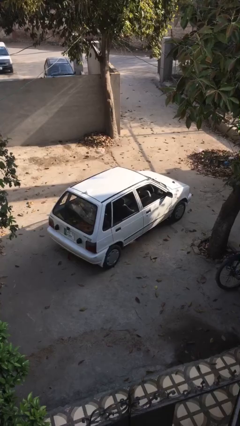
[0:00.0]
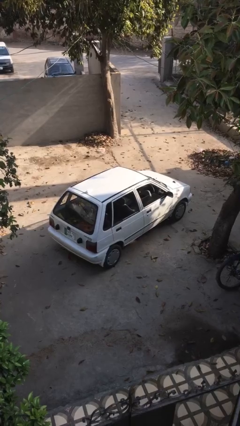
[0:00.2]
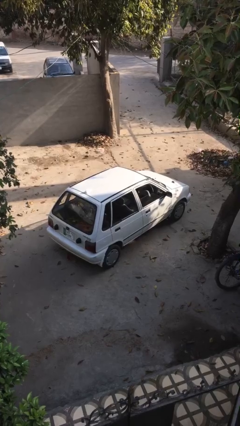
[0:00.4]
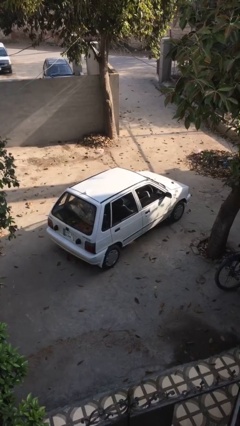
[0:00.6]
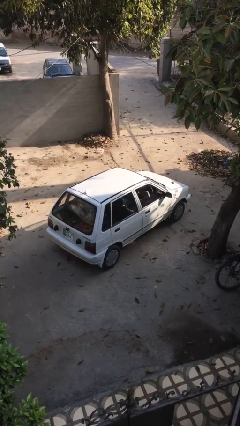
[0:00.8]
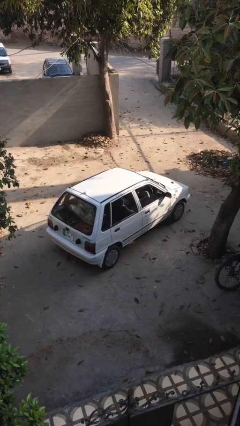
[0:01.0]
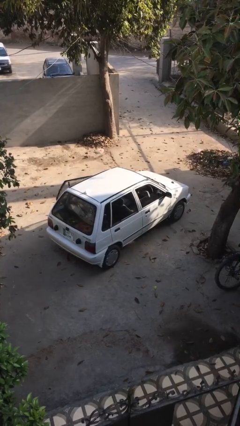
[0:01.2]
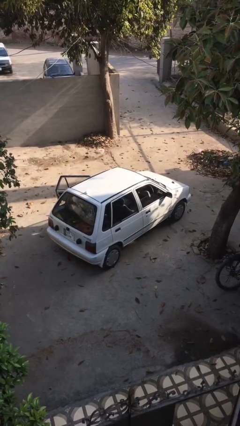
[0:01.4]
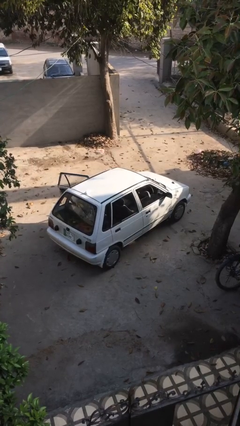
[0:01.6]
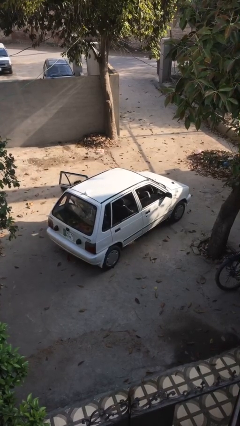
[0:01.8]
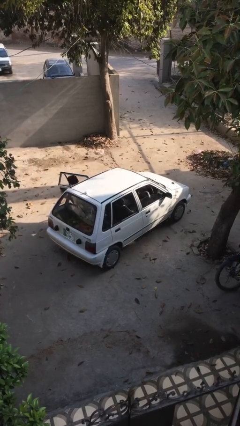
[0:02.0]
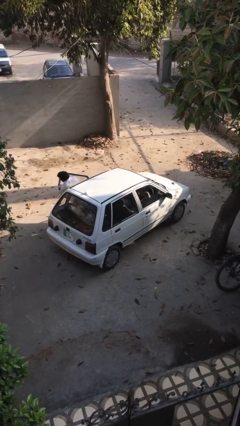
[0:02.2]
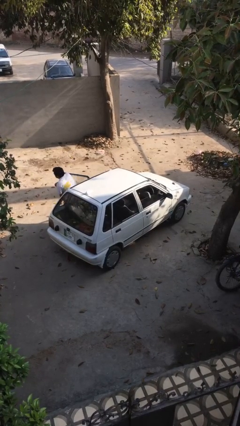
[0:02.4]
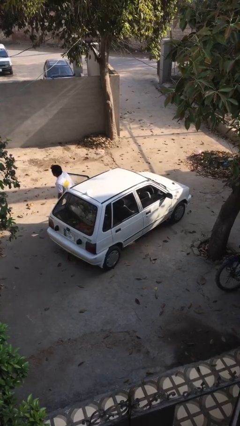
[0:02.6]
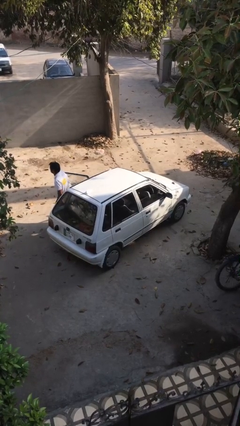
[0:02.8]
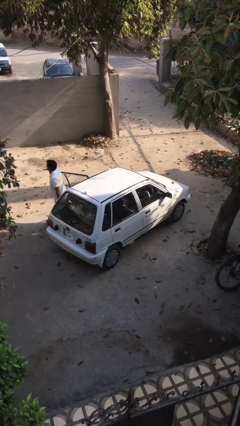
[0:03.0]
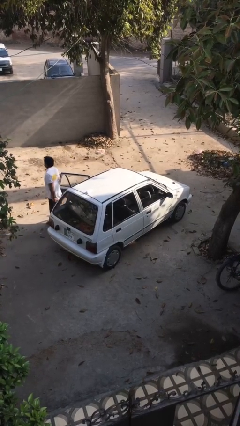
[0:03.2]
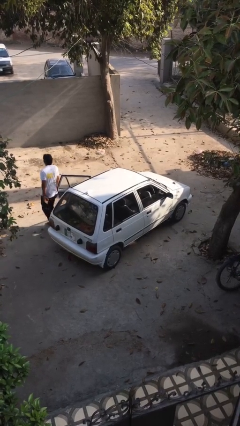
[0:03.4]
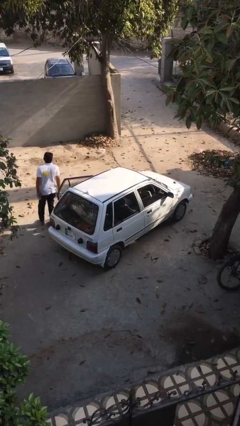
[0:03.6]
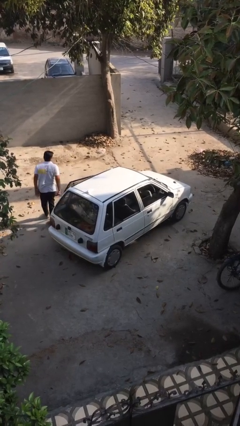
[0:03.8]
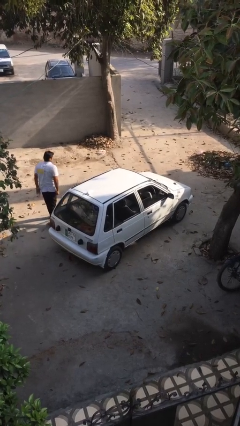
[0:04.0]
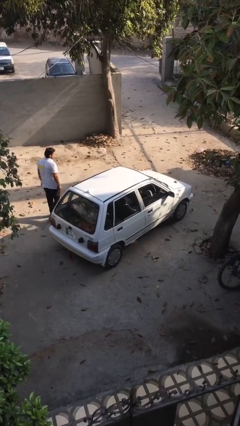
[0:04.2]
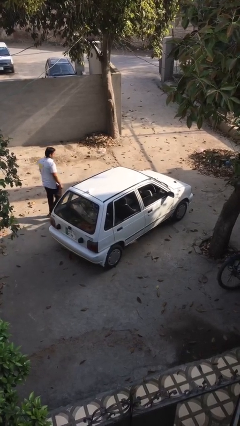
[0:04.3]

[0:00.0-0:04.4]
car drops off person

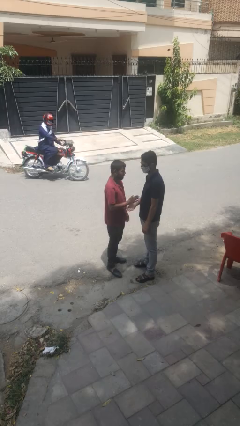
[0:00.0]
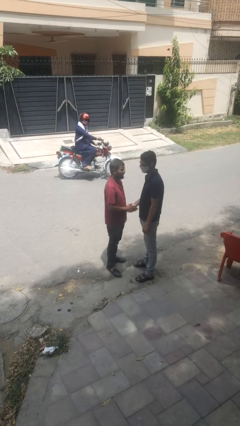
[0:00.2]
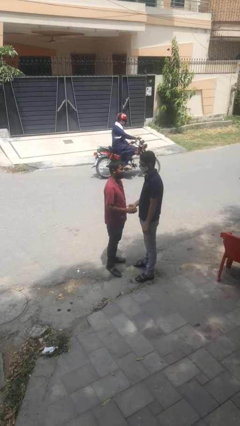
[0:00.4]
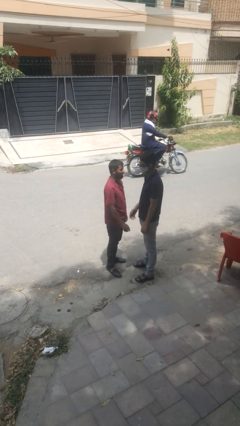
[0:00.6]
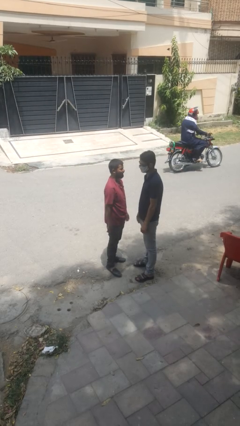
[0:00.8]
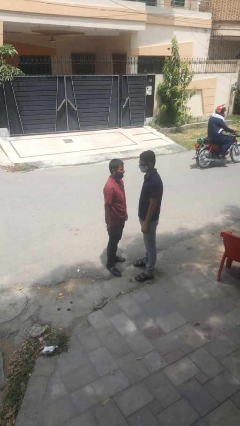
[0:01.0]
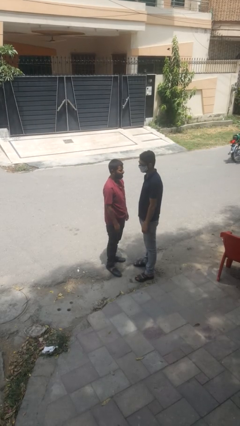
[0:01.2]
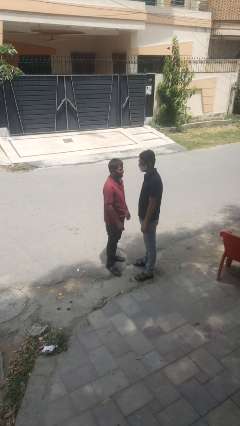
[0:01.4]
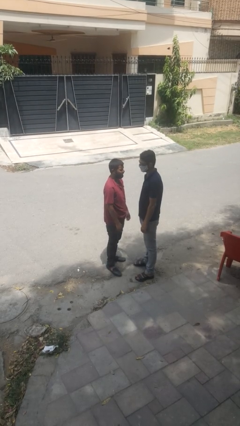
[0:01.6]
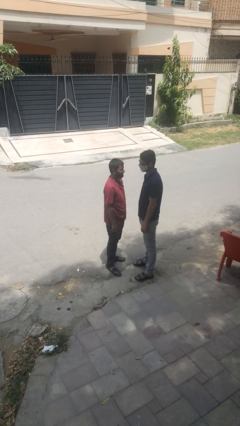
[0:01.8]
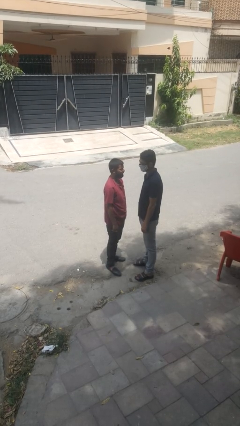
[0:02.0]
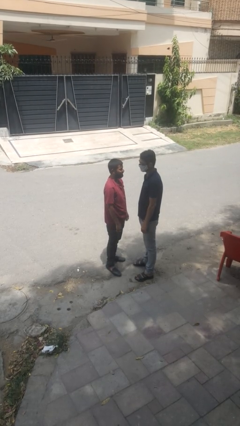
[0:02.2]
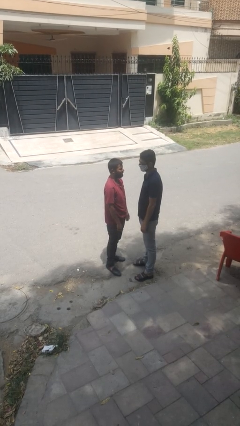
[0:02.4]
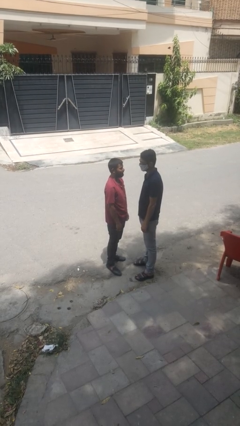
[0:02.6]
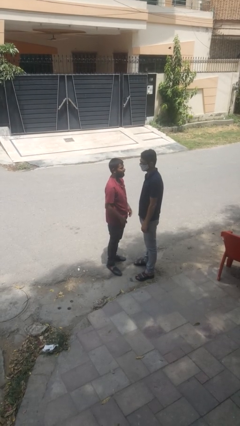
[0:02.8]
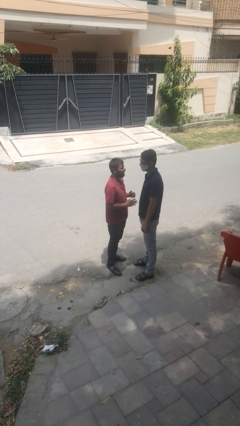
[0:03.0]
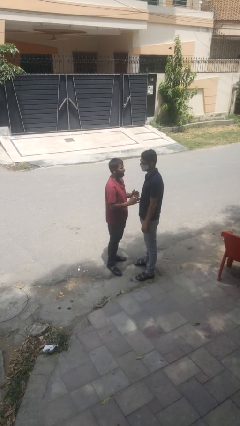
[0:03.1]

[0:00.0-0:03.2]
person highfives hand

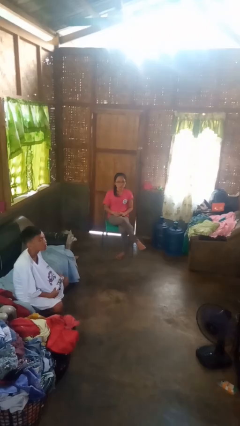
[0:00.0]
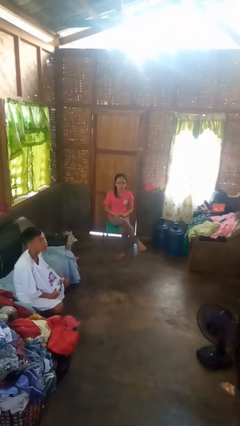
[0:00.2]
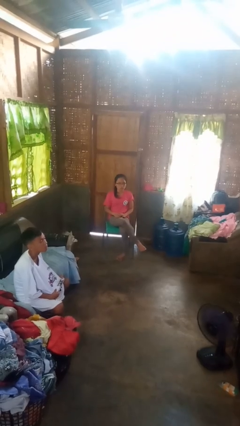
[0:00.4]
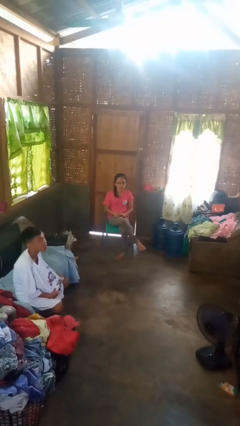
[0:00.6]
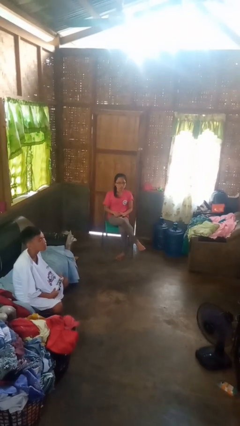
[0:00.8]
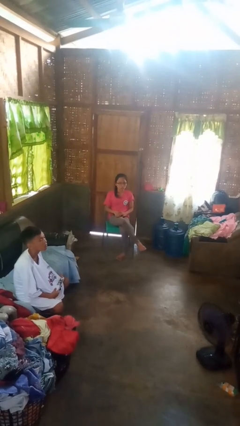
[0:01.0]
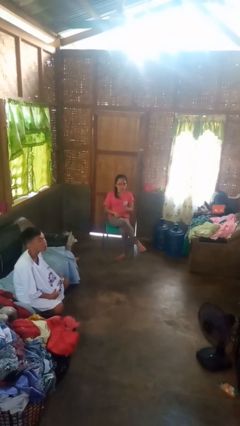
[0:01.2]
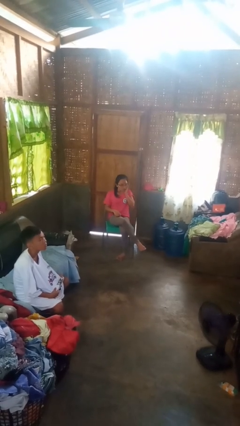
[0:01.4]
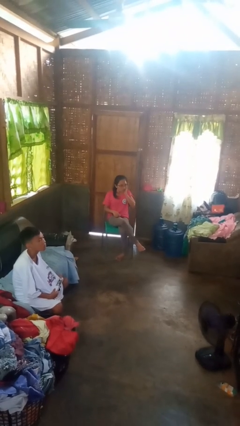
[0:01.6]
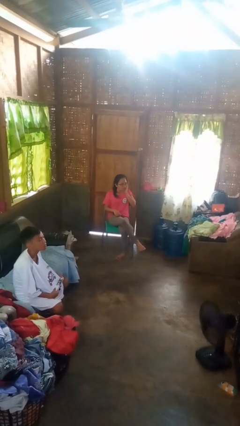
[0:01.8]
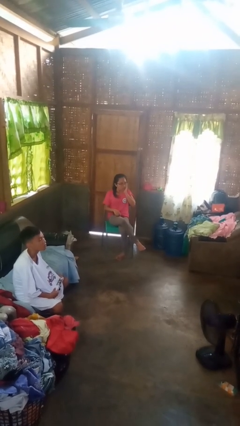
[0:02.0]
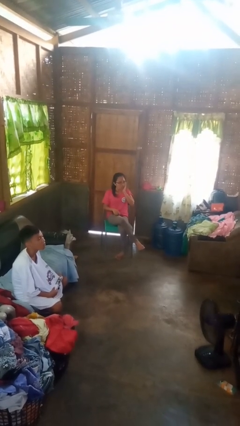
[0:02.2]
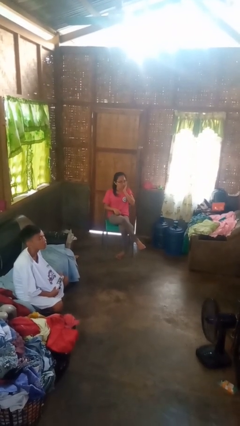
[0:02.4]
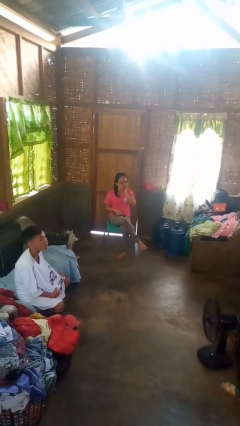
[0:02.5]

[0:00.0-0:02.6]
person swats bug

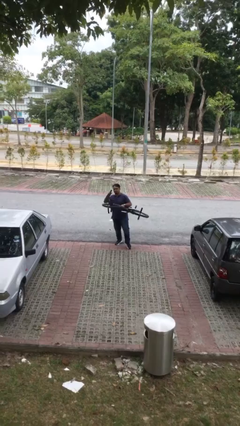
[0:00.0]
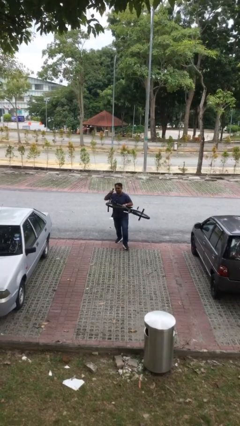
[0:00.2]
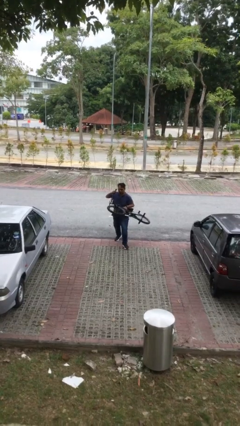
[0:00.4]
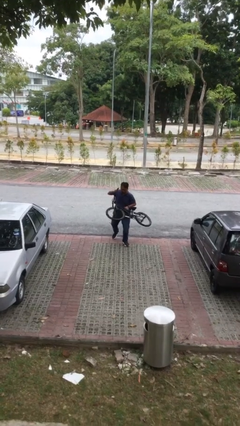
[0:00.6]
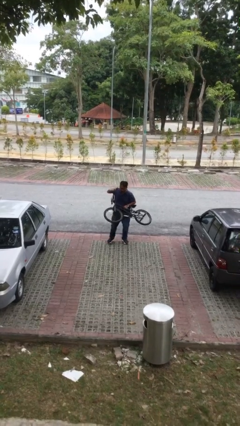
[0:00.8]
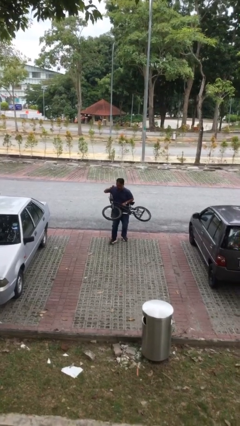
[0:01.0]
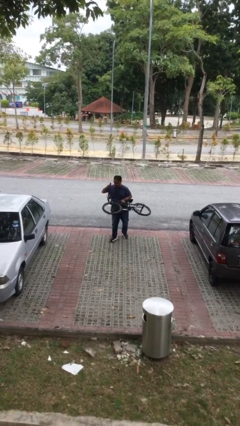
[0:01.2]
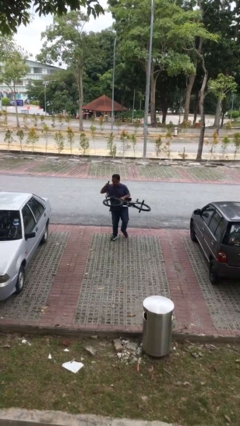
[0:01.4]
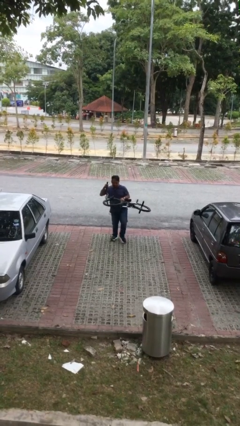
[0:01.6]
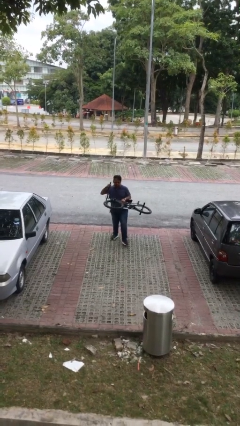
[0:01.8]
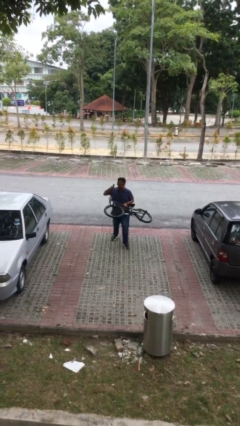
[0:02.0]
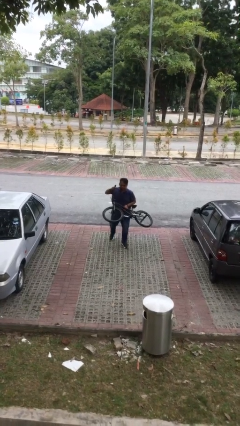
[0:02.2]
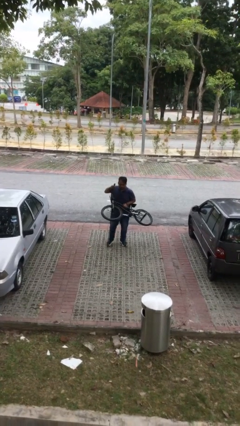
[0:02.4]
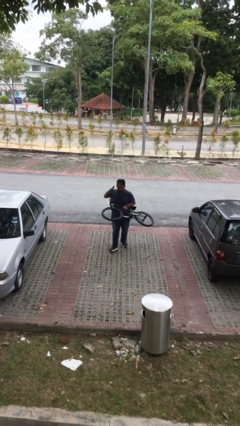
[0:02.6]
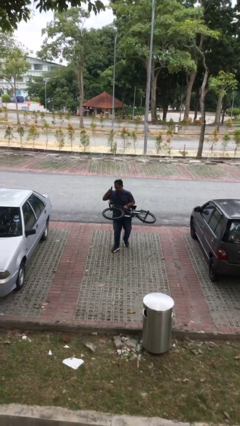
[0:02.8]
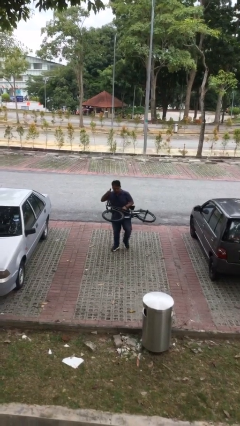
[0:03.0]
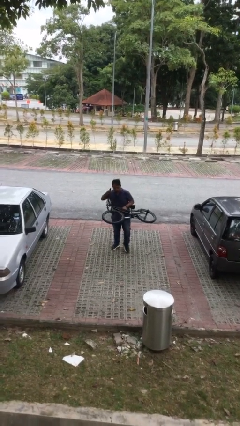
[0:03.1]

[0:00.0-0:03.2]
person carries heavy object

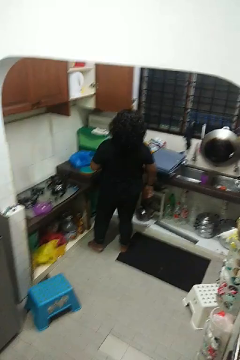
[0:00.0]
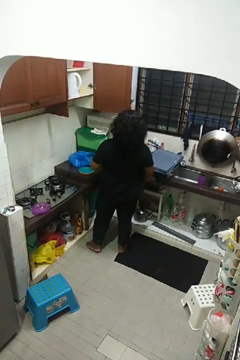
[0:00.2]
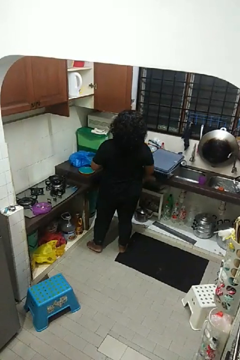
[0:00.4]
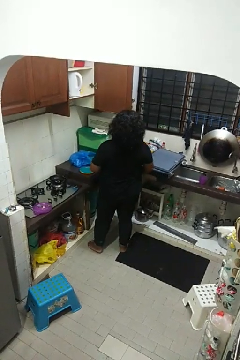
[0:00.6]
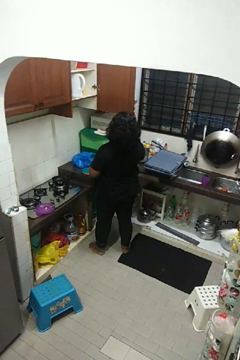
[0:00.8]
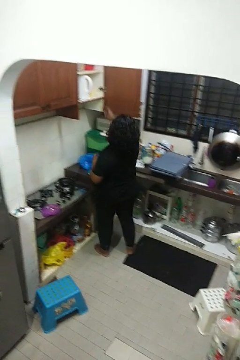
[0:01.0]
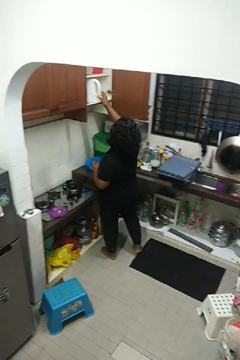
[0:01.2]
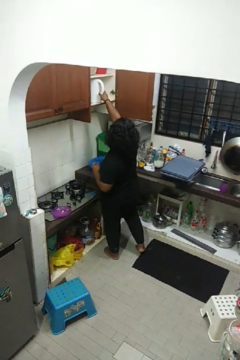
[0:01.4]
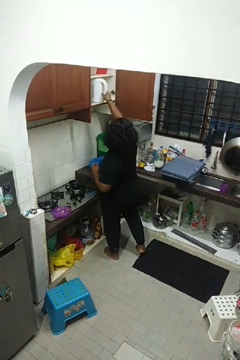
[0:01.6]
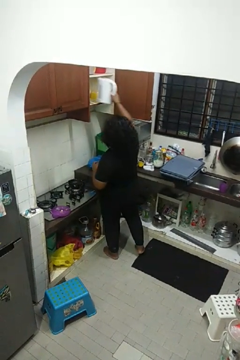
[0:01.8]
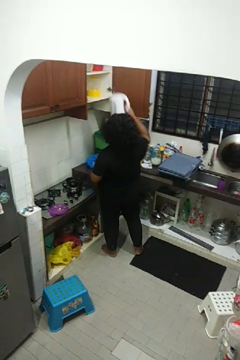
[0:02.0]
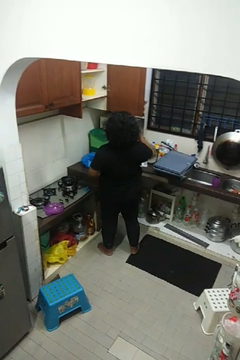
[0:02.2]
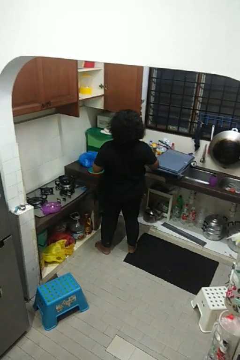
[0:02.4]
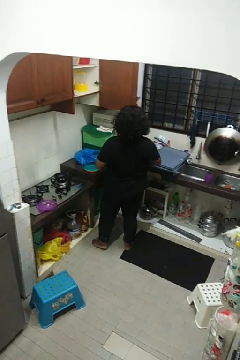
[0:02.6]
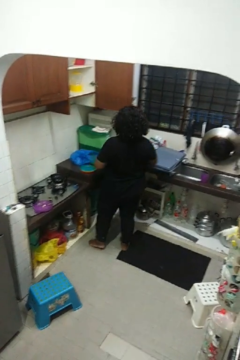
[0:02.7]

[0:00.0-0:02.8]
person takes object from cabinet

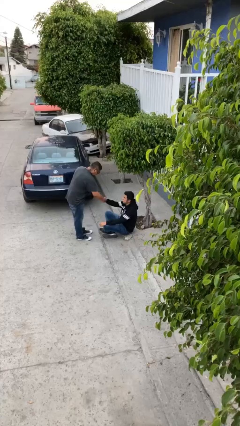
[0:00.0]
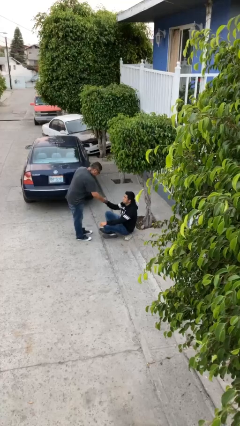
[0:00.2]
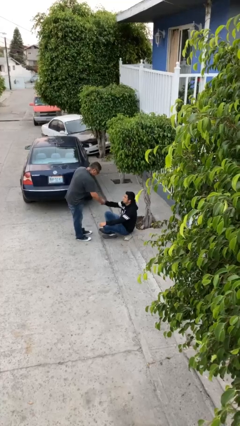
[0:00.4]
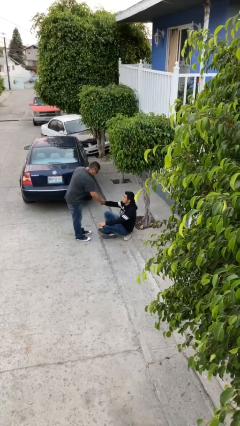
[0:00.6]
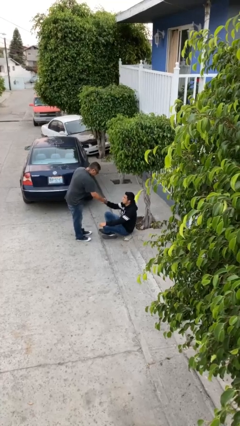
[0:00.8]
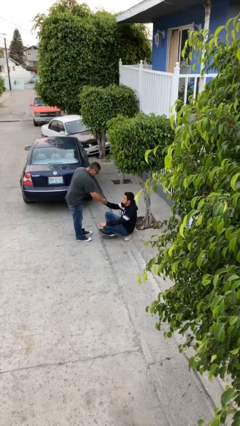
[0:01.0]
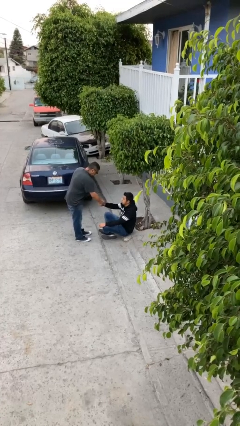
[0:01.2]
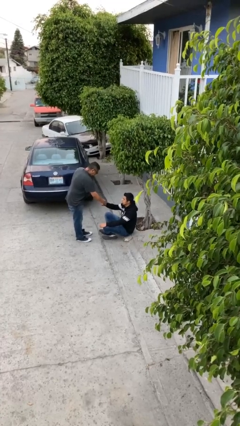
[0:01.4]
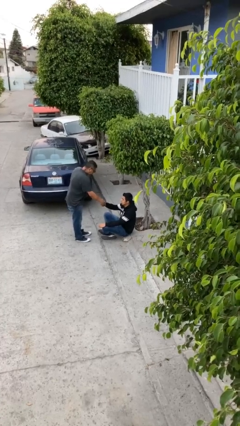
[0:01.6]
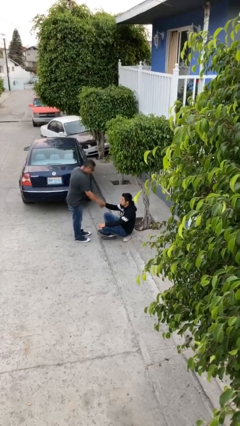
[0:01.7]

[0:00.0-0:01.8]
person shakes hand
